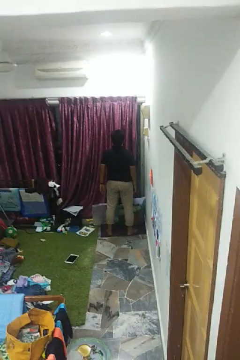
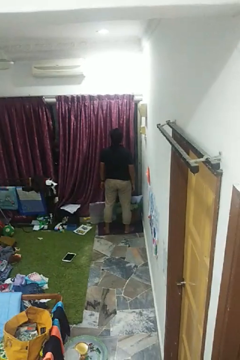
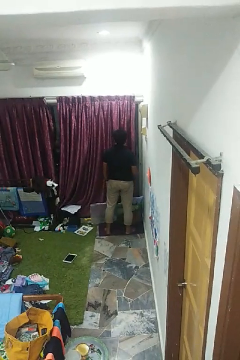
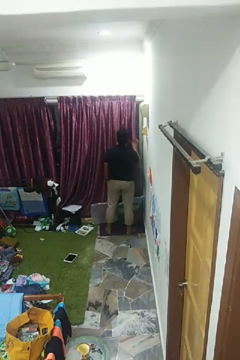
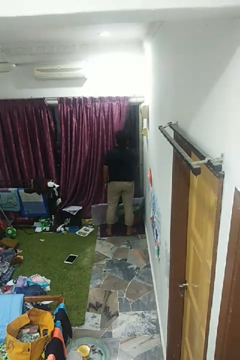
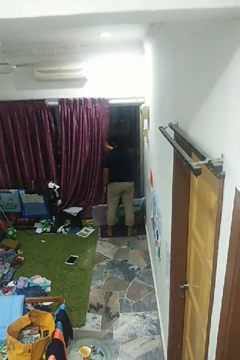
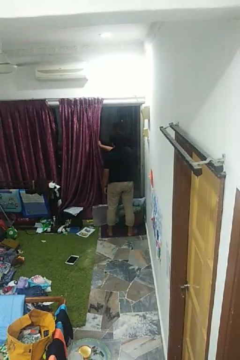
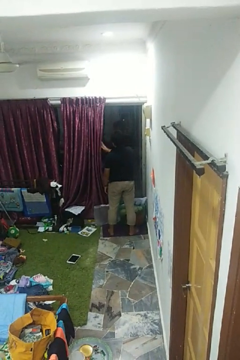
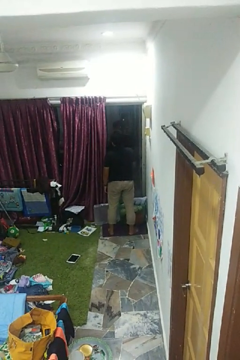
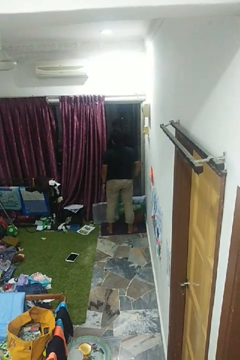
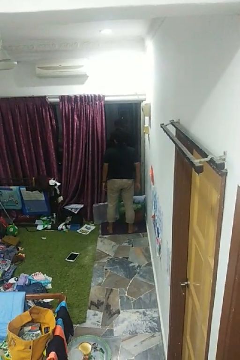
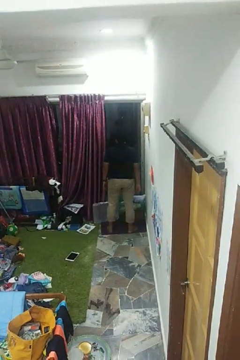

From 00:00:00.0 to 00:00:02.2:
person opens curtains

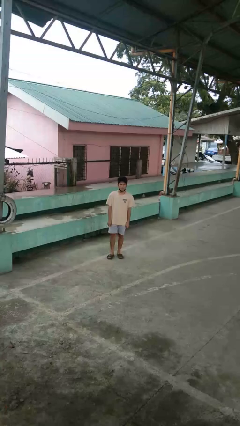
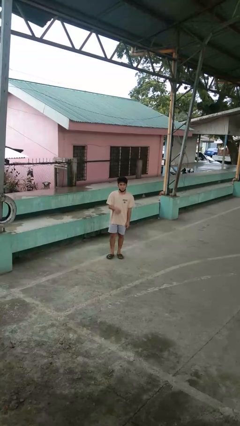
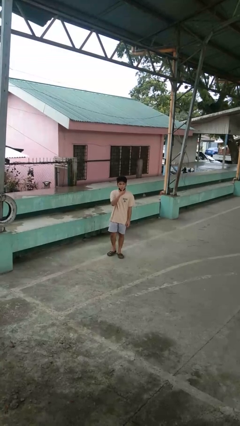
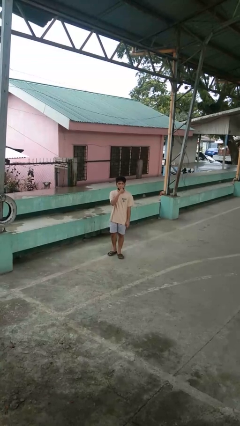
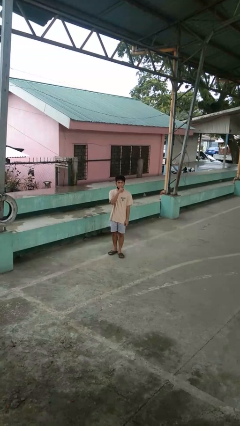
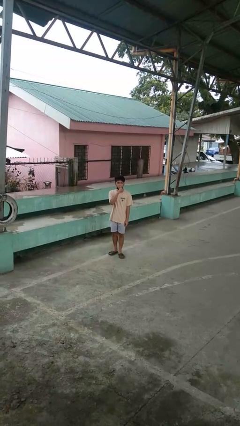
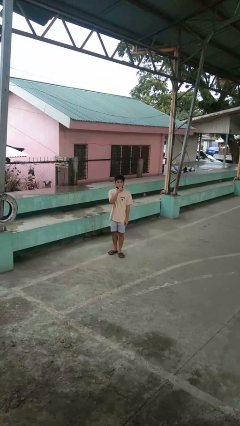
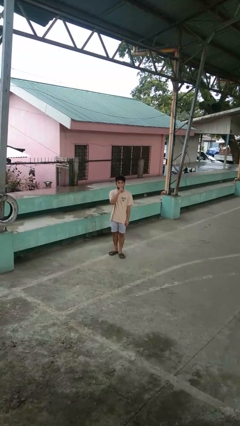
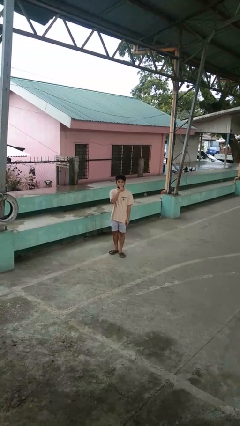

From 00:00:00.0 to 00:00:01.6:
person gestures be quiet

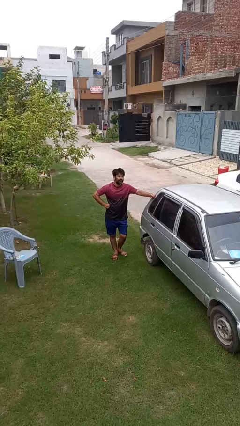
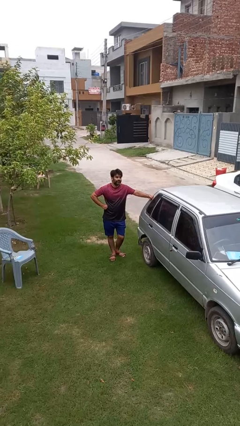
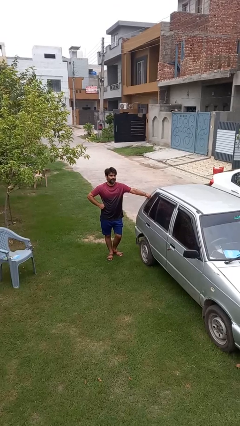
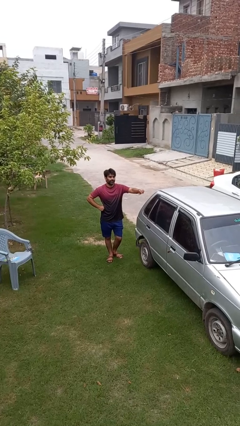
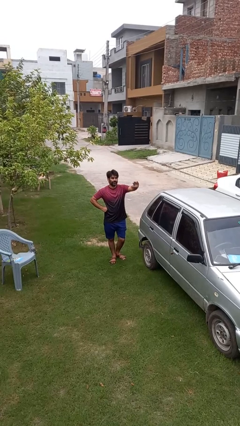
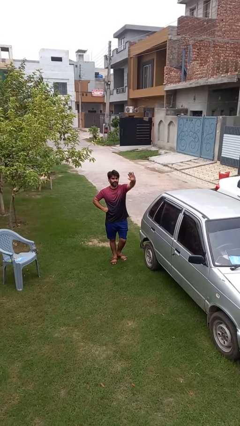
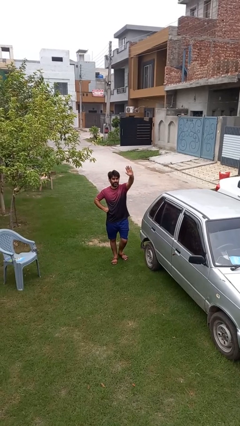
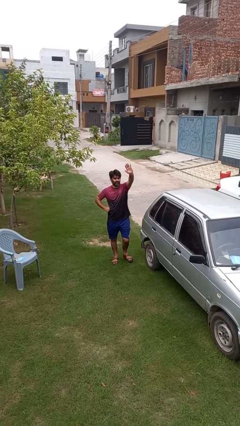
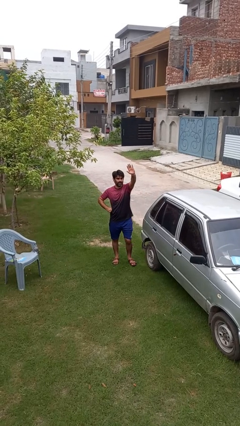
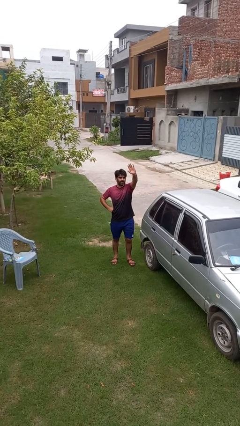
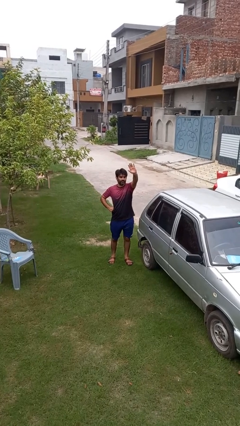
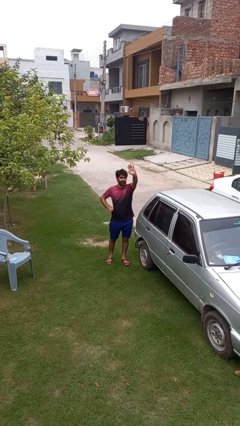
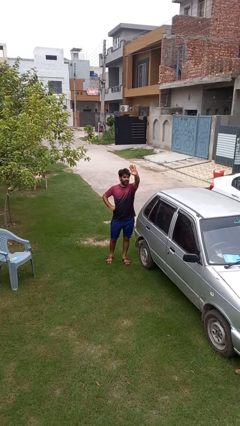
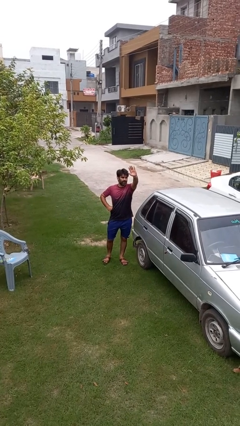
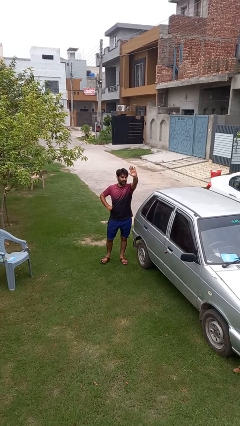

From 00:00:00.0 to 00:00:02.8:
person gestures raise hand

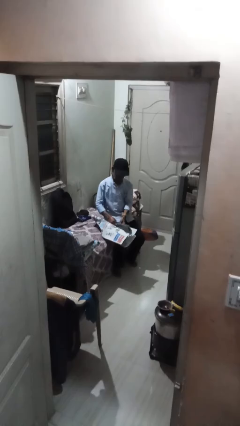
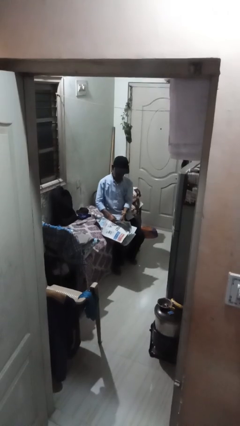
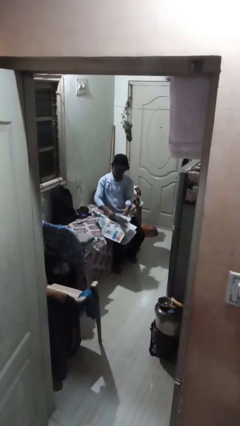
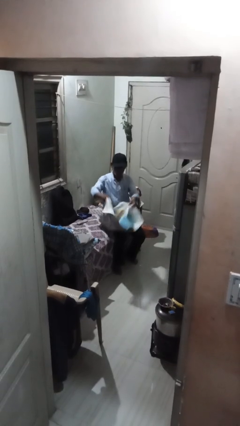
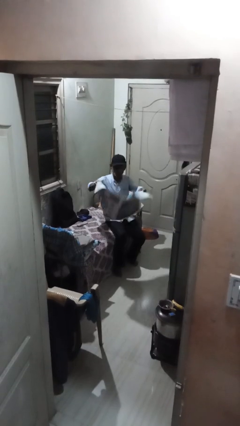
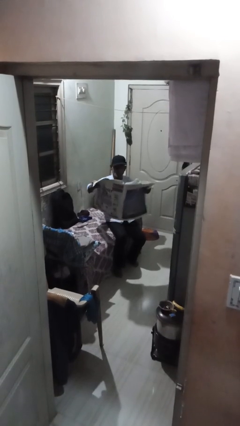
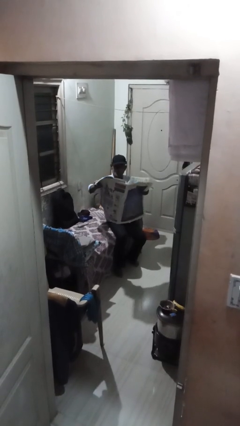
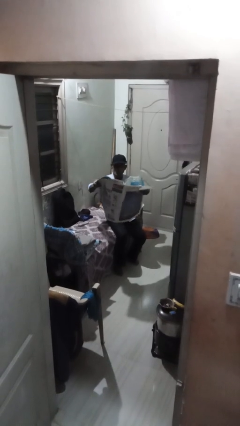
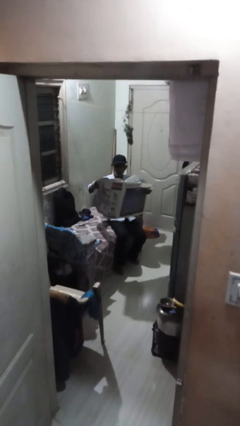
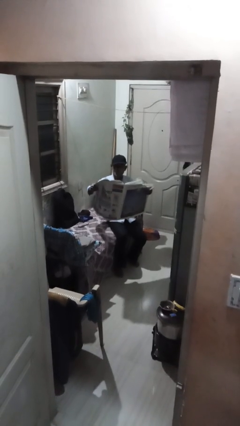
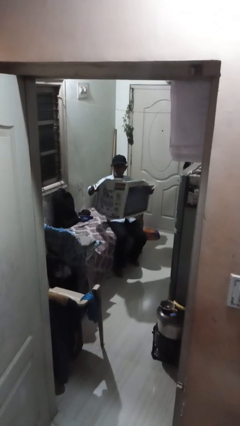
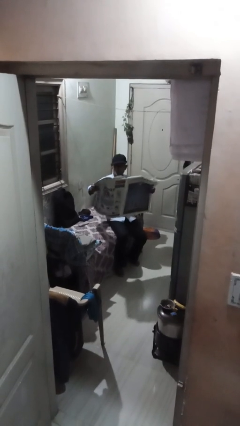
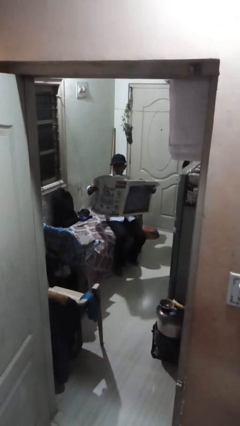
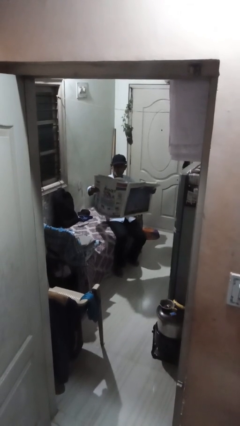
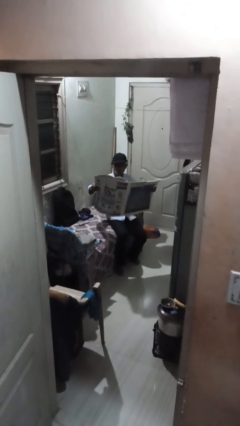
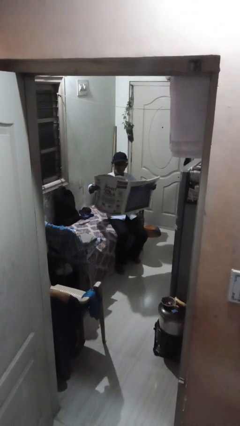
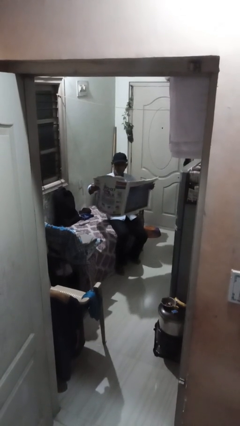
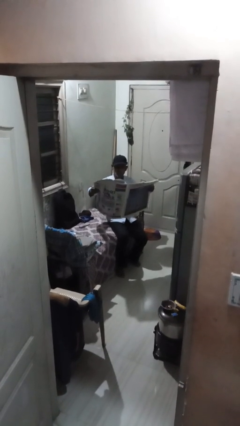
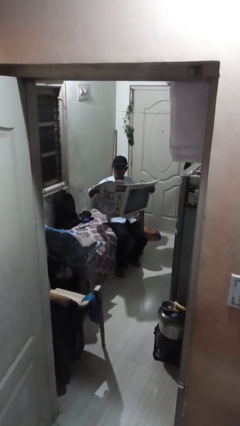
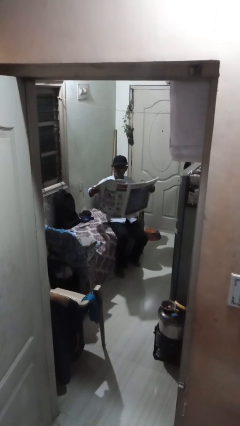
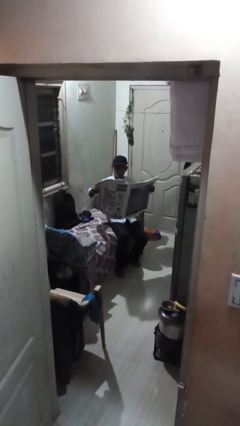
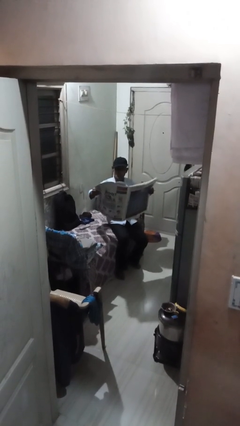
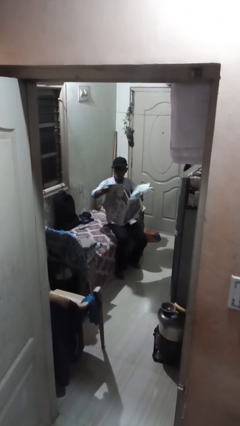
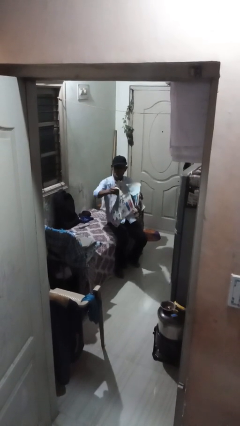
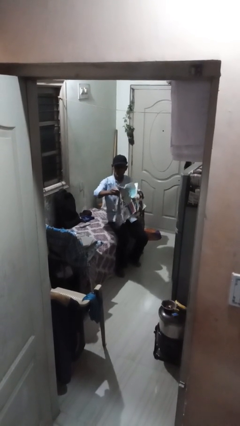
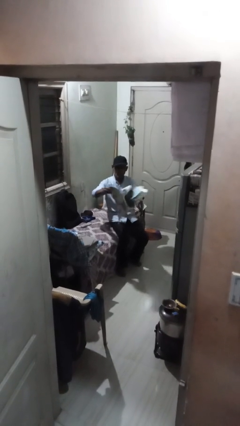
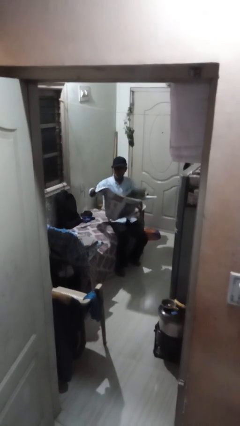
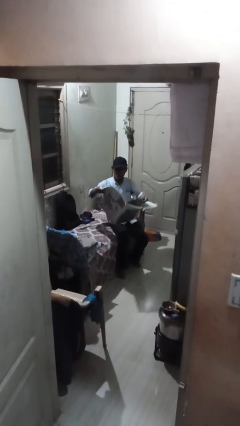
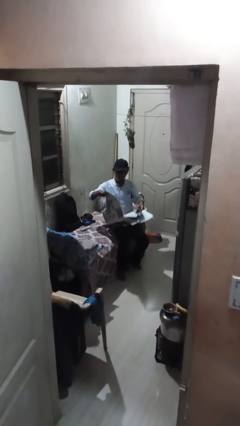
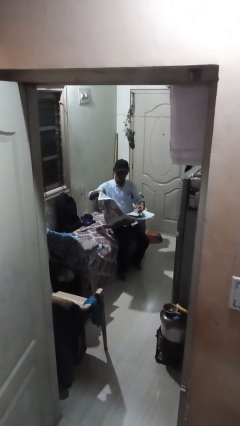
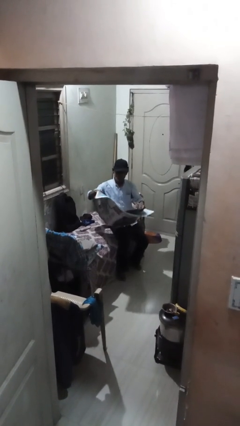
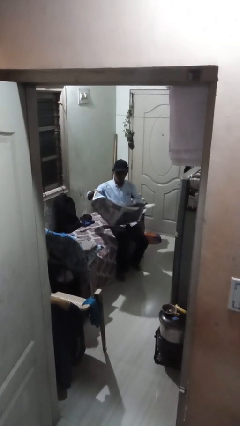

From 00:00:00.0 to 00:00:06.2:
person reads newspaper

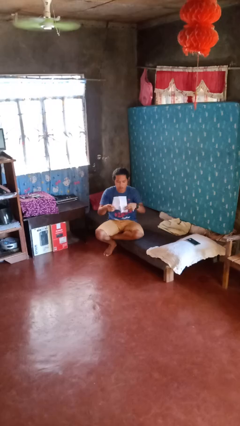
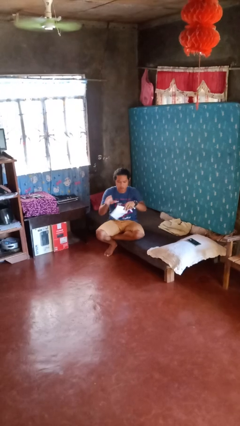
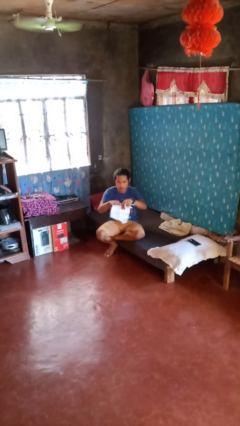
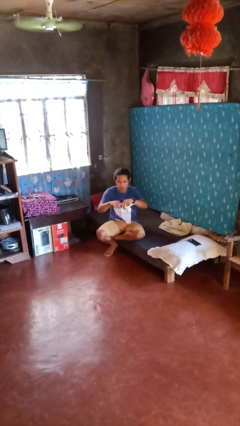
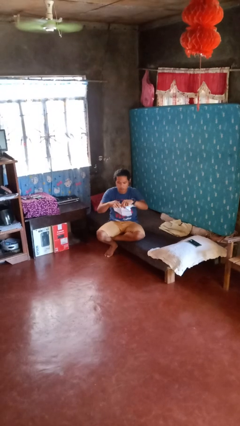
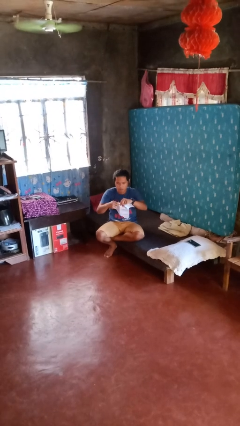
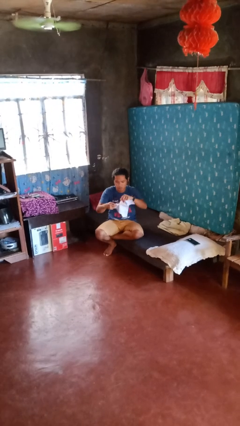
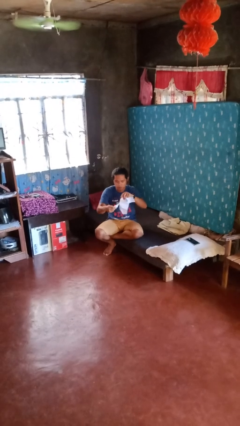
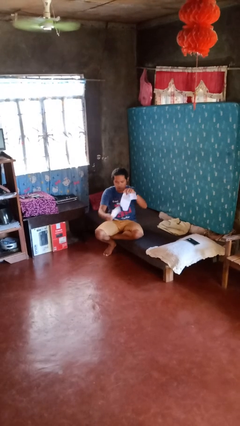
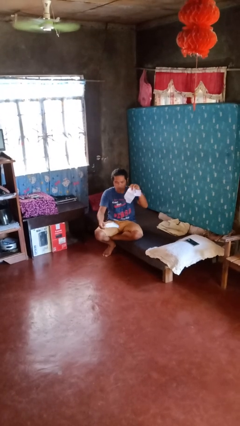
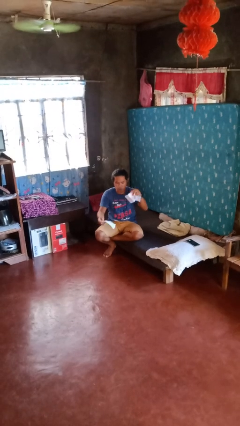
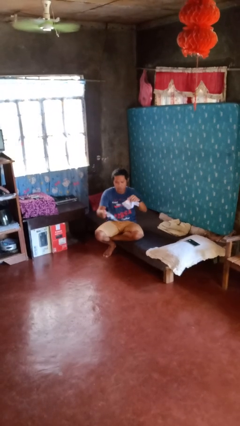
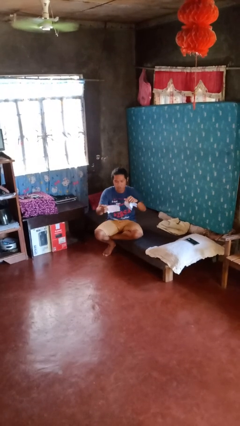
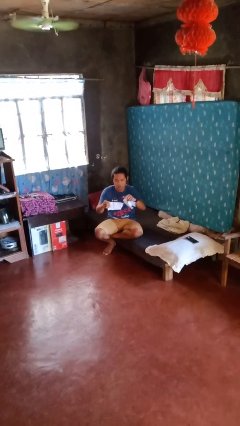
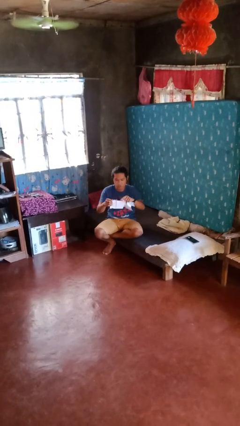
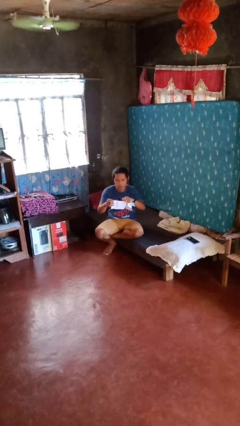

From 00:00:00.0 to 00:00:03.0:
person tears paper

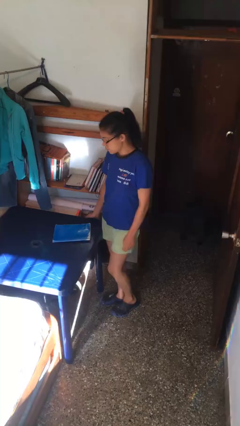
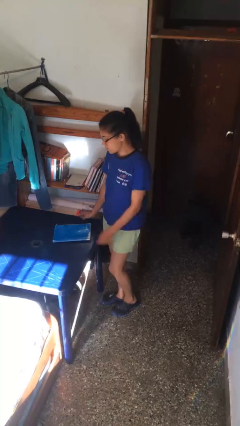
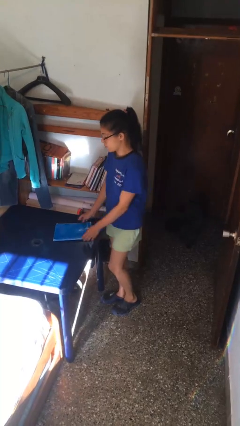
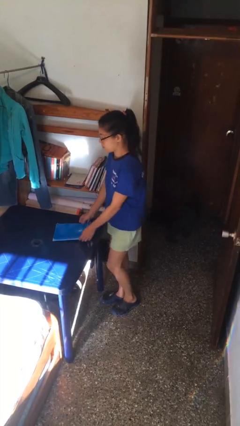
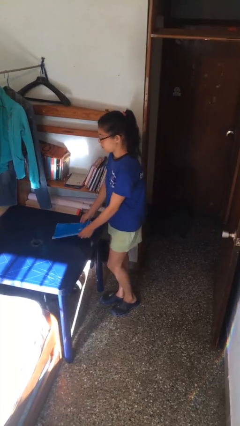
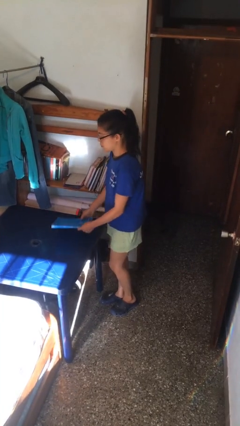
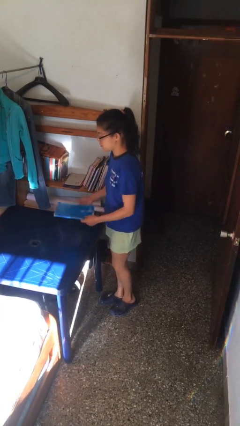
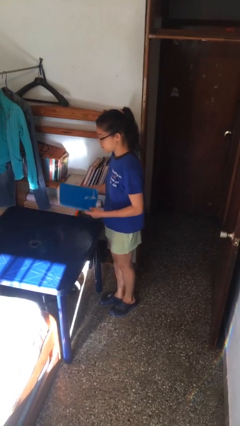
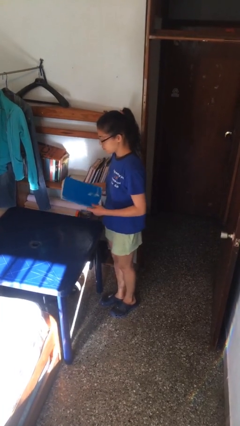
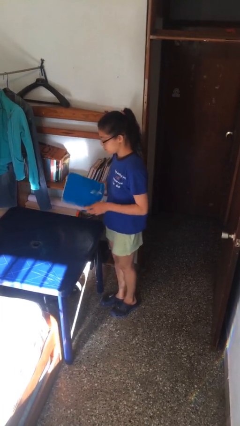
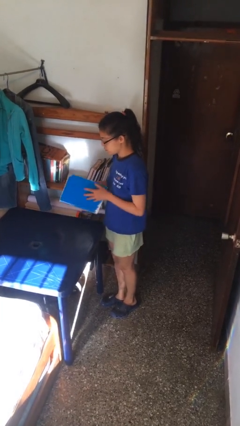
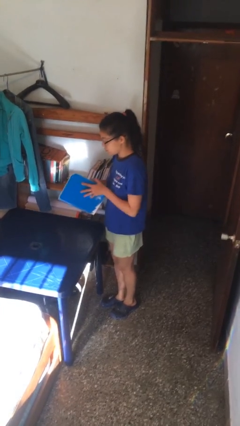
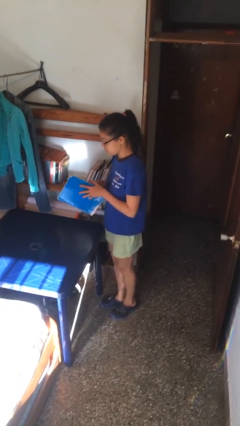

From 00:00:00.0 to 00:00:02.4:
person picks up object from table
